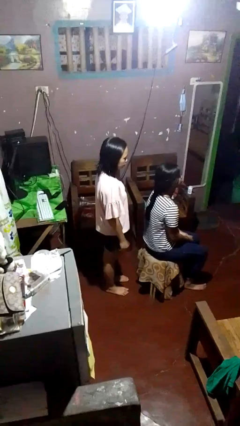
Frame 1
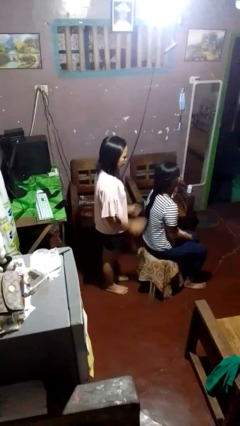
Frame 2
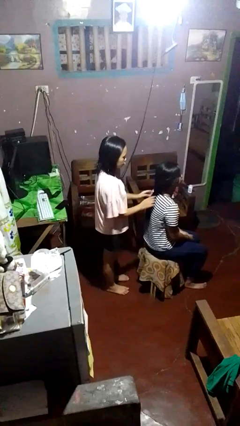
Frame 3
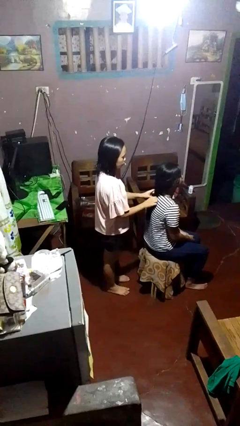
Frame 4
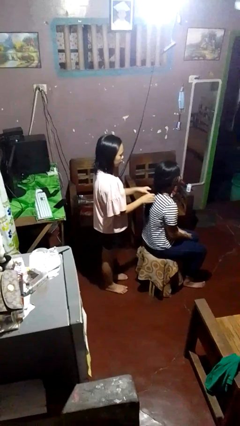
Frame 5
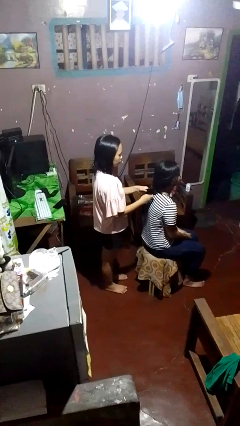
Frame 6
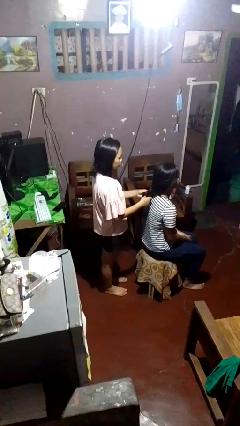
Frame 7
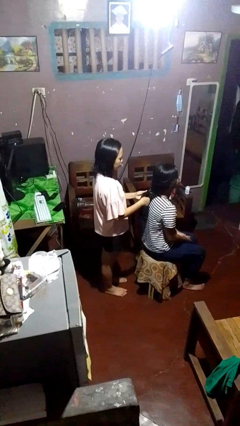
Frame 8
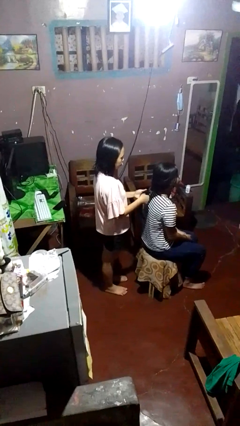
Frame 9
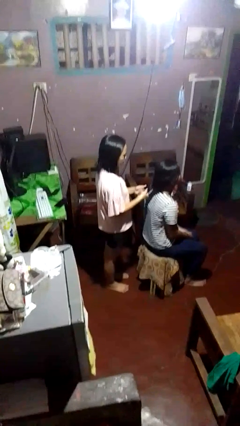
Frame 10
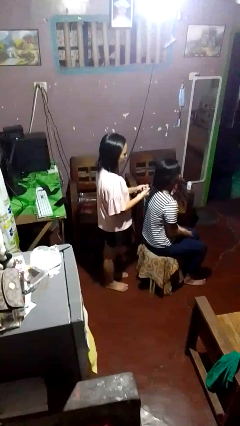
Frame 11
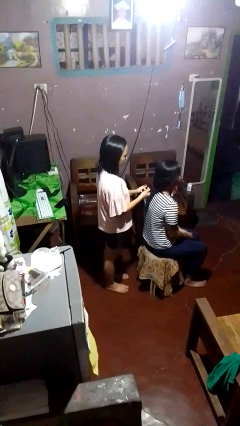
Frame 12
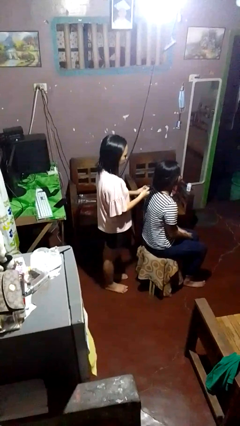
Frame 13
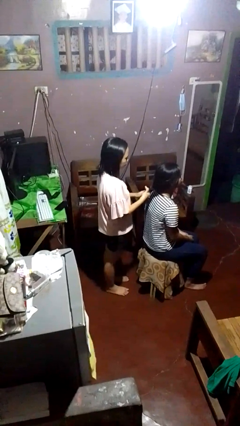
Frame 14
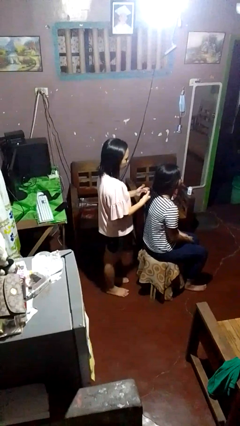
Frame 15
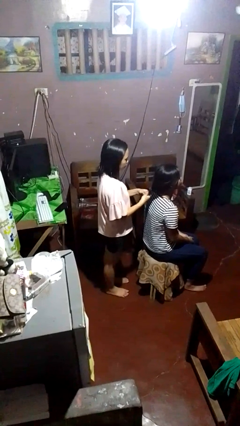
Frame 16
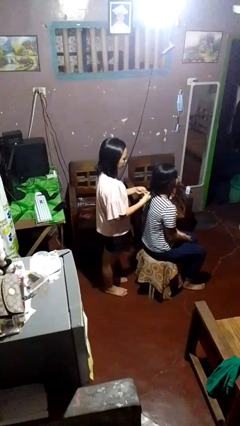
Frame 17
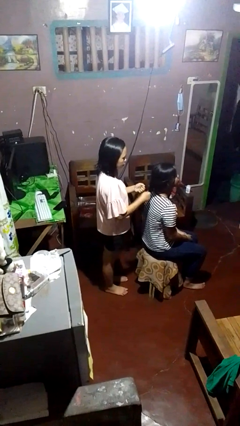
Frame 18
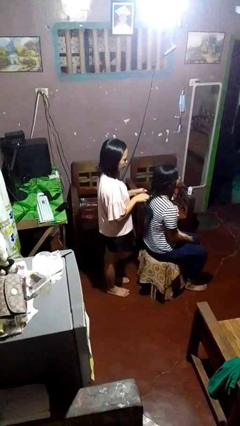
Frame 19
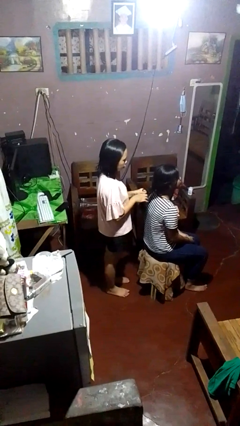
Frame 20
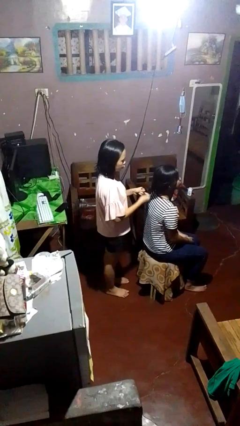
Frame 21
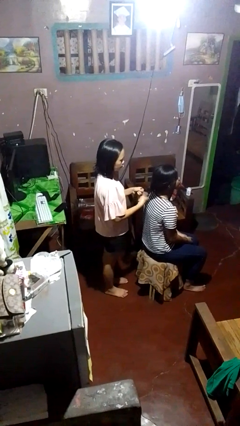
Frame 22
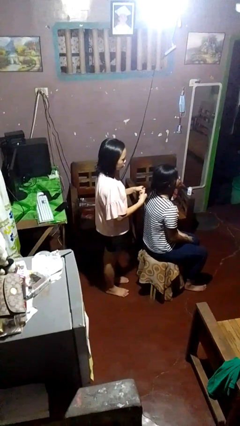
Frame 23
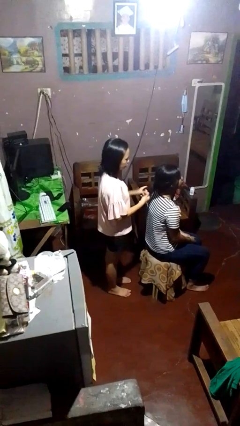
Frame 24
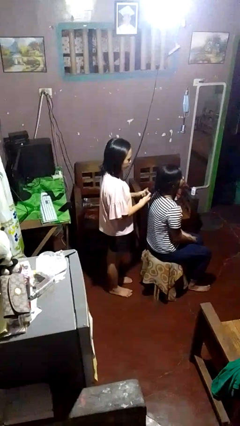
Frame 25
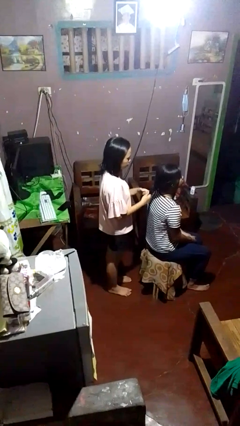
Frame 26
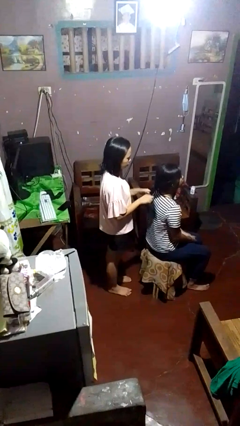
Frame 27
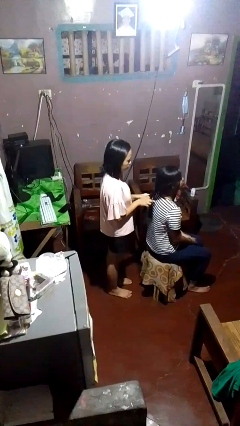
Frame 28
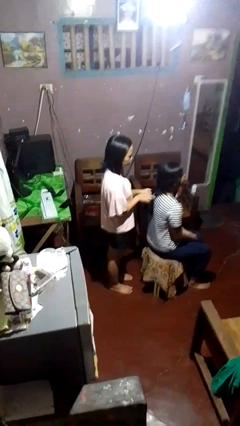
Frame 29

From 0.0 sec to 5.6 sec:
person braids hair of person

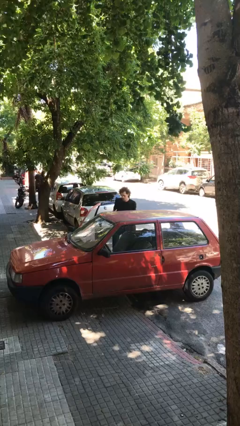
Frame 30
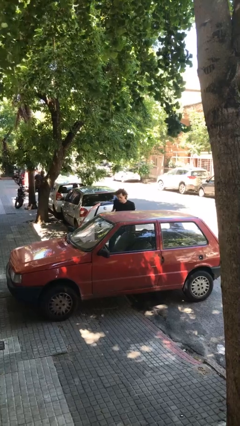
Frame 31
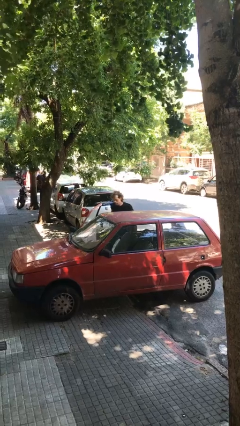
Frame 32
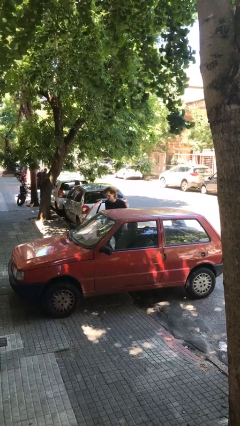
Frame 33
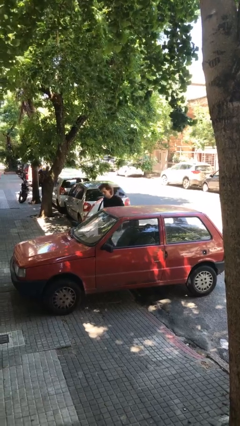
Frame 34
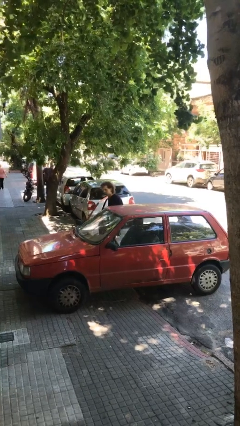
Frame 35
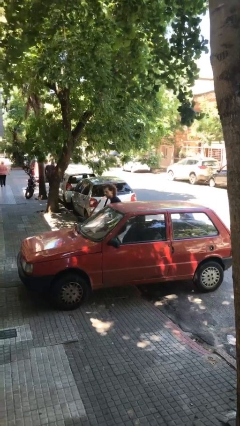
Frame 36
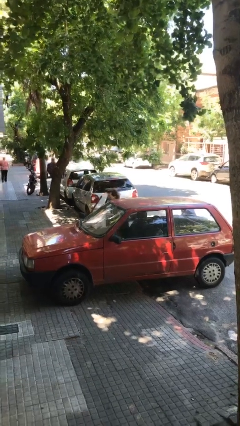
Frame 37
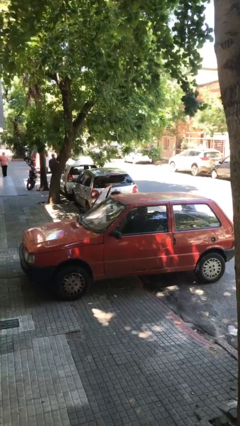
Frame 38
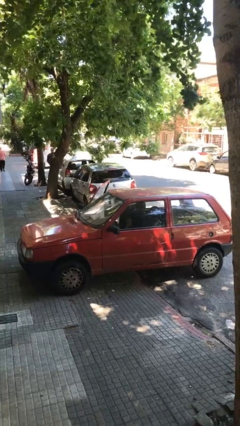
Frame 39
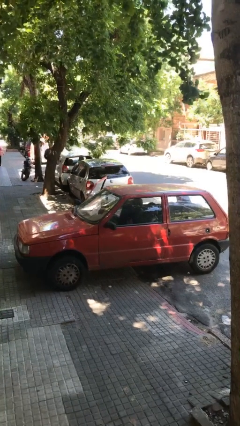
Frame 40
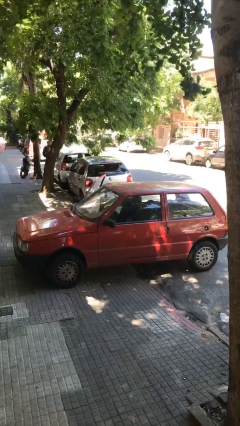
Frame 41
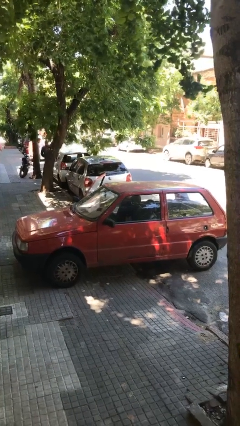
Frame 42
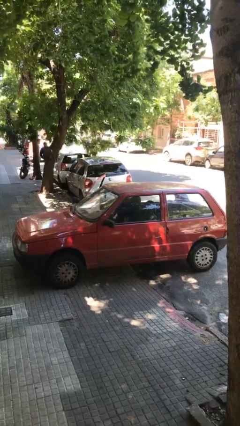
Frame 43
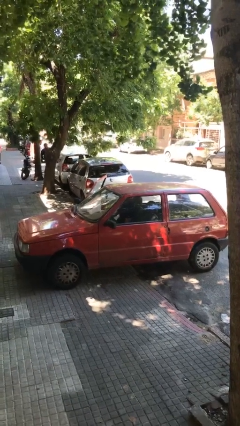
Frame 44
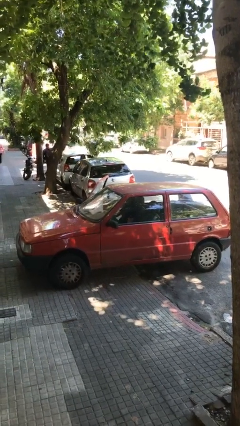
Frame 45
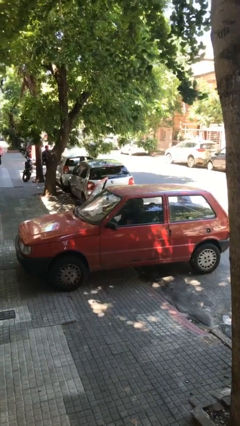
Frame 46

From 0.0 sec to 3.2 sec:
person enters car

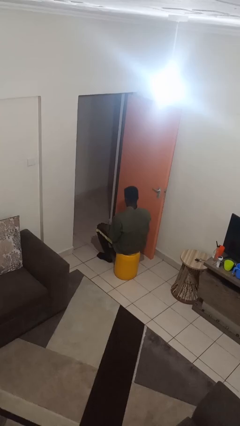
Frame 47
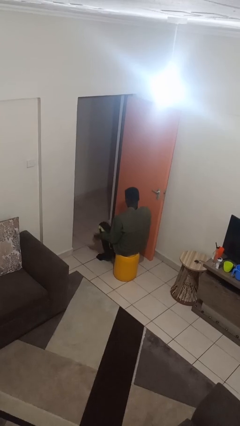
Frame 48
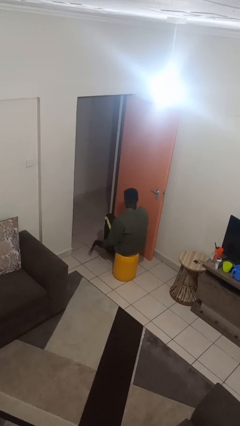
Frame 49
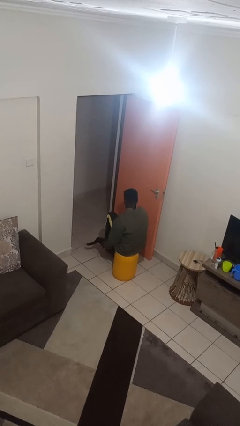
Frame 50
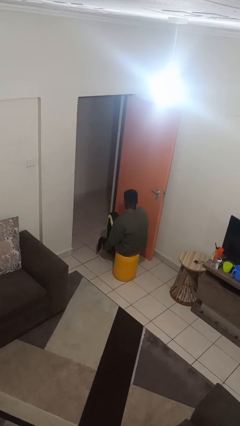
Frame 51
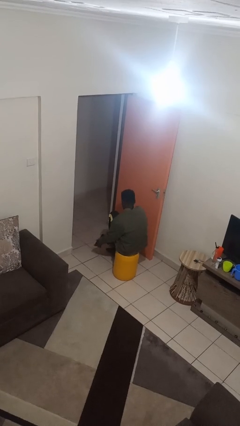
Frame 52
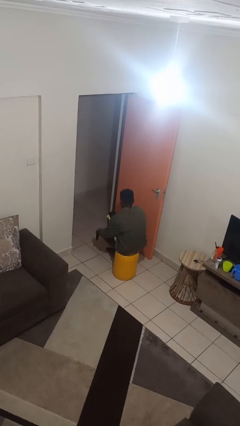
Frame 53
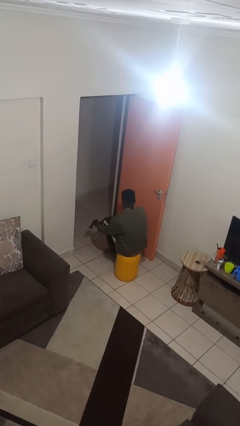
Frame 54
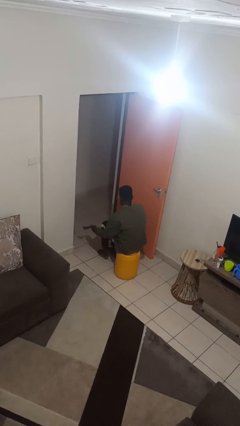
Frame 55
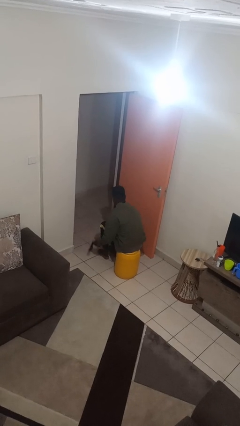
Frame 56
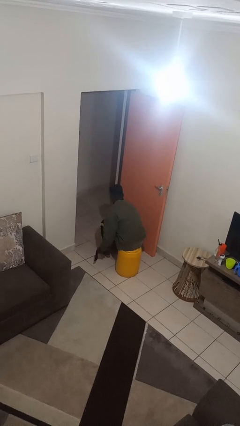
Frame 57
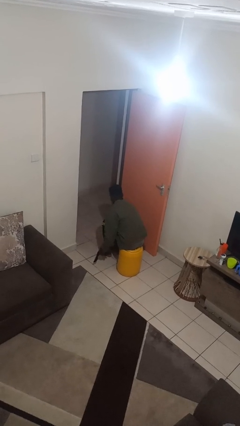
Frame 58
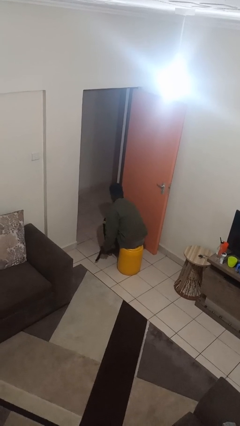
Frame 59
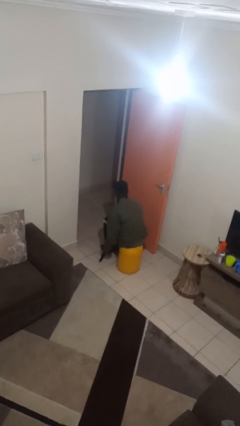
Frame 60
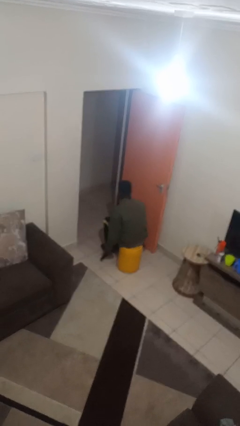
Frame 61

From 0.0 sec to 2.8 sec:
person takes off socks

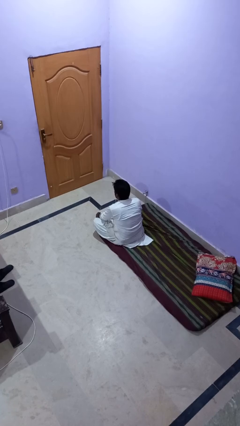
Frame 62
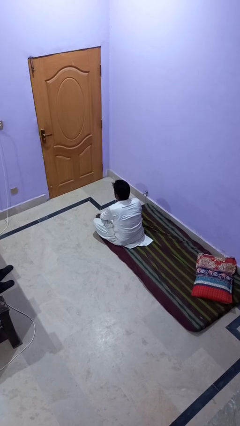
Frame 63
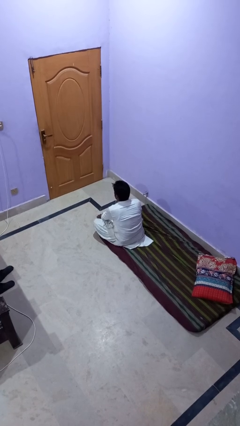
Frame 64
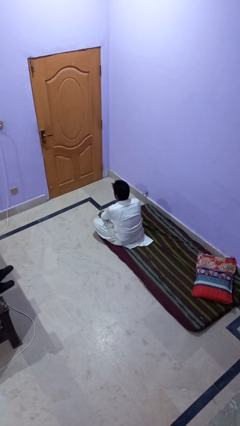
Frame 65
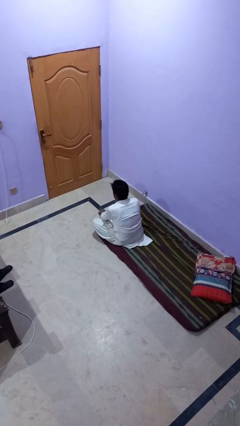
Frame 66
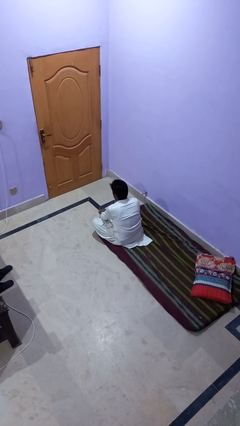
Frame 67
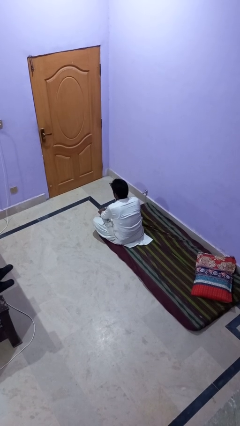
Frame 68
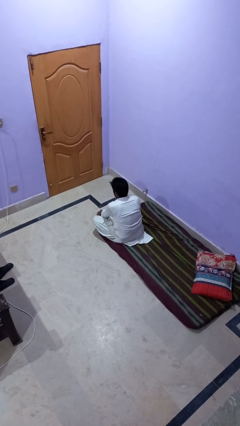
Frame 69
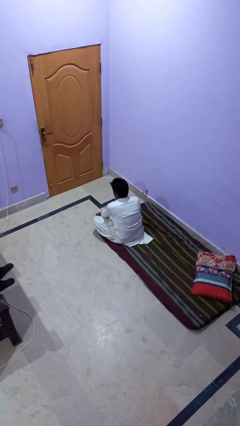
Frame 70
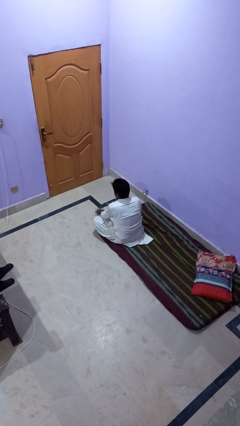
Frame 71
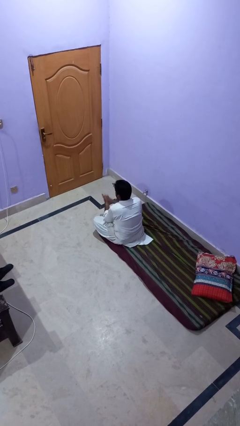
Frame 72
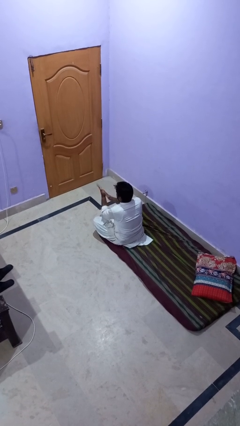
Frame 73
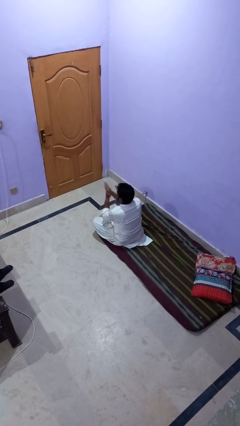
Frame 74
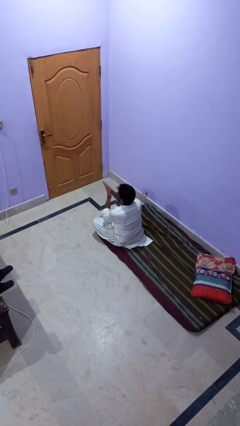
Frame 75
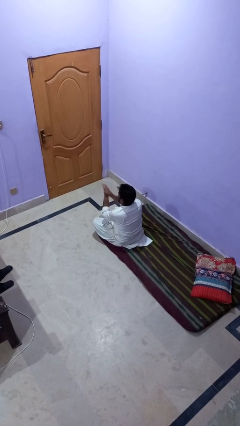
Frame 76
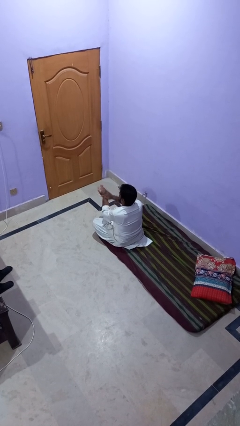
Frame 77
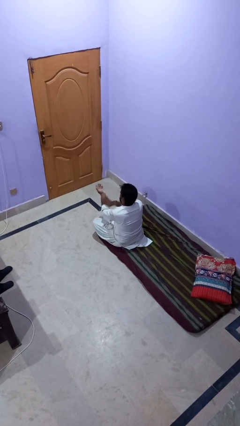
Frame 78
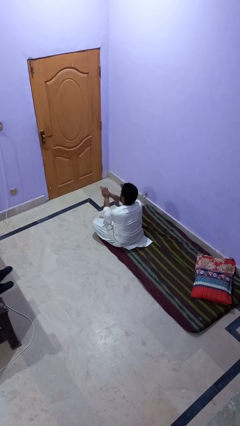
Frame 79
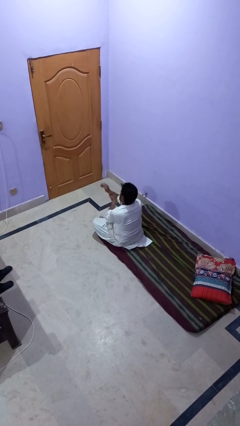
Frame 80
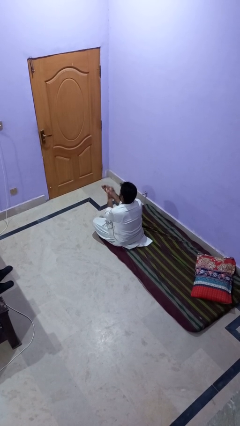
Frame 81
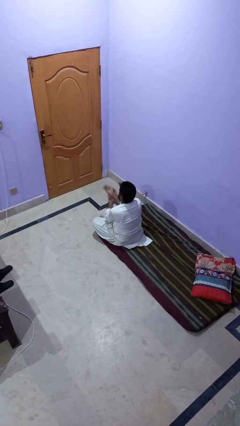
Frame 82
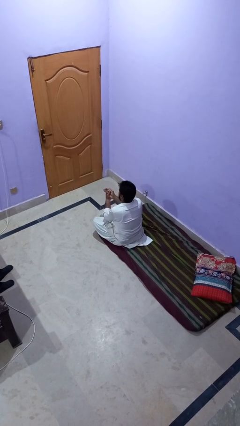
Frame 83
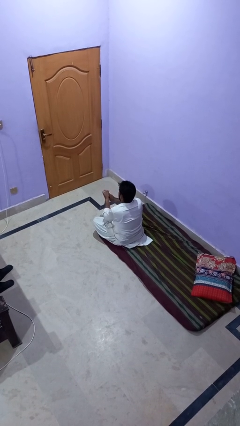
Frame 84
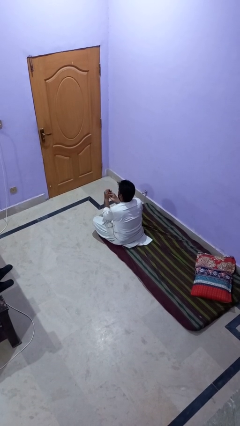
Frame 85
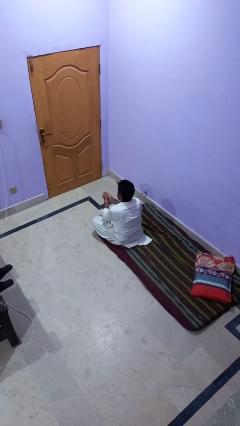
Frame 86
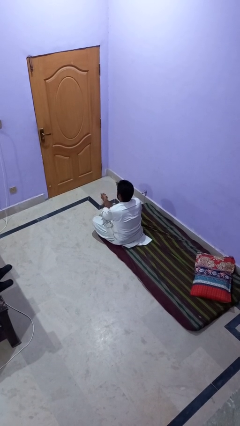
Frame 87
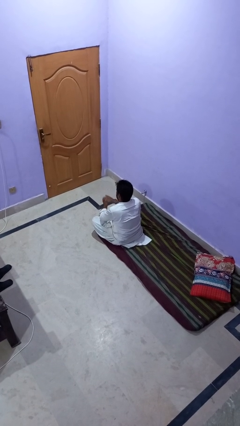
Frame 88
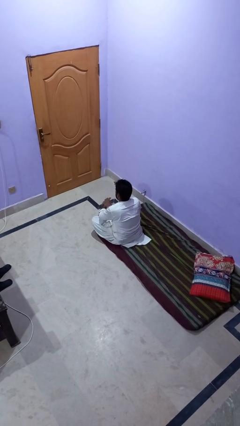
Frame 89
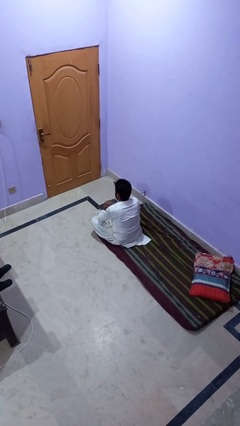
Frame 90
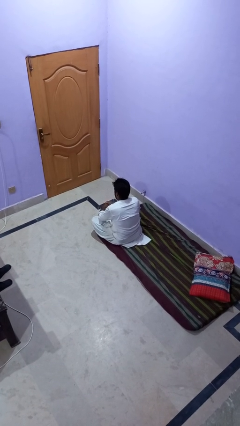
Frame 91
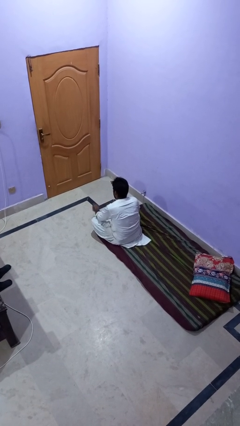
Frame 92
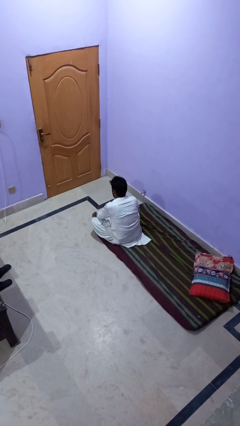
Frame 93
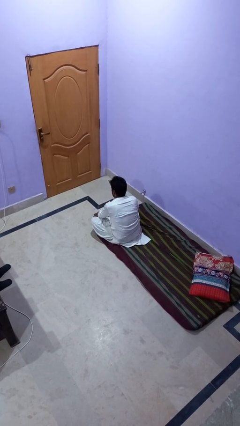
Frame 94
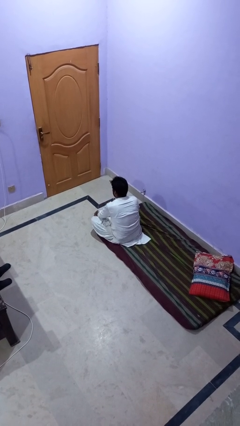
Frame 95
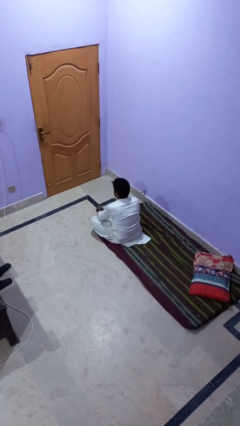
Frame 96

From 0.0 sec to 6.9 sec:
person applies sunscreen
